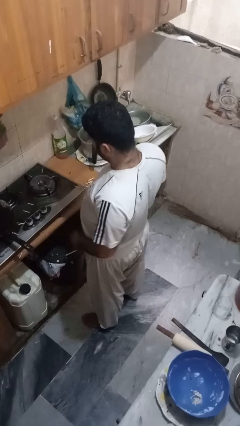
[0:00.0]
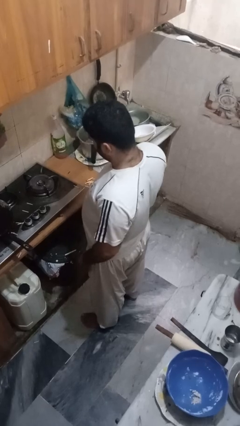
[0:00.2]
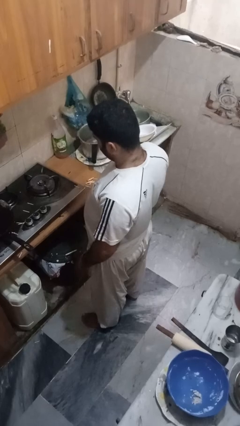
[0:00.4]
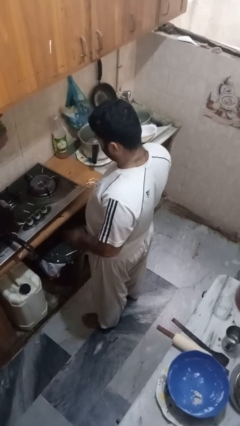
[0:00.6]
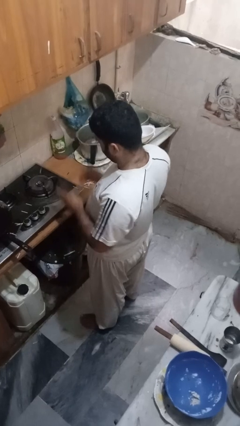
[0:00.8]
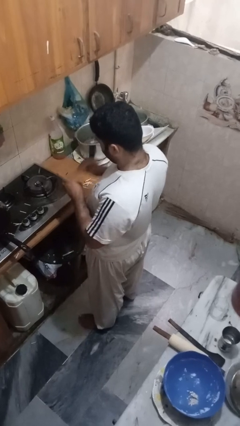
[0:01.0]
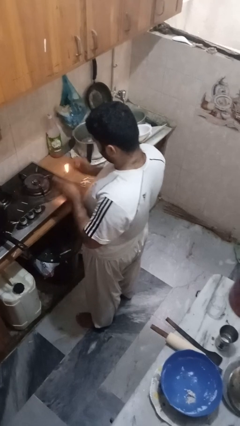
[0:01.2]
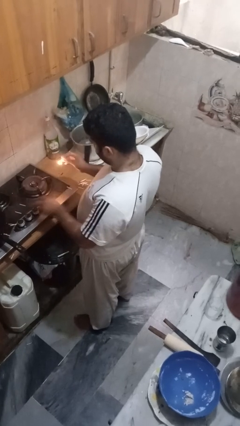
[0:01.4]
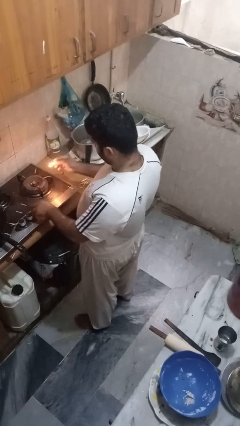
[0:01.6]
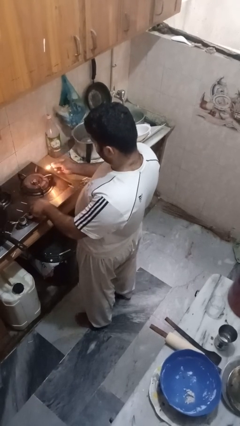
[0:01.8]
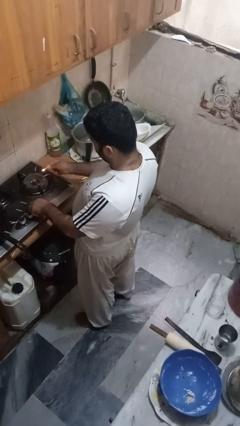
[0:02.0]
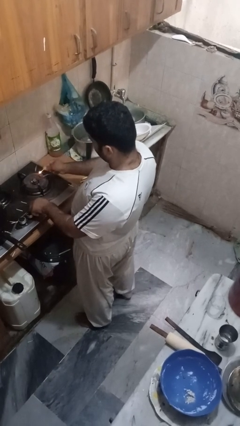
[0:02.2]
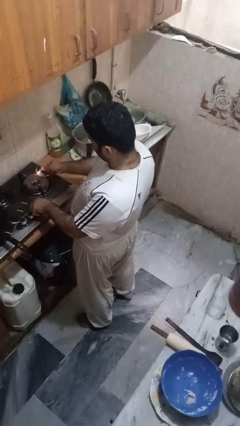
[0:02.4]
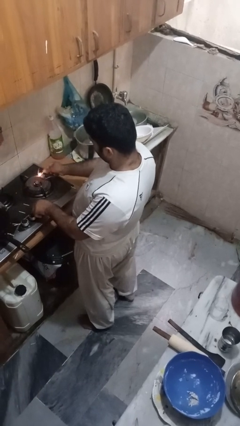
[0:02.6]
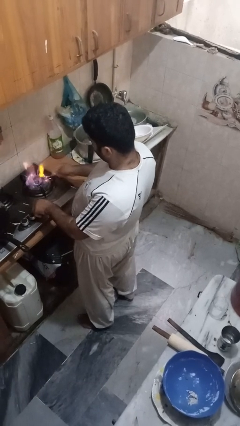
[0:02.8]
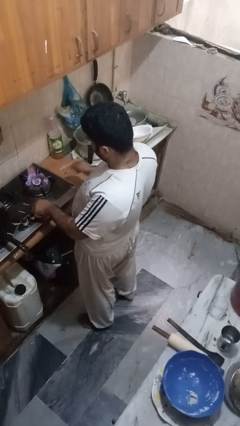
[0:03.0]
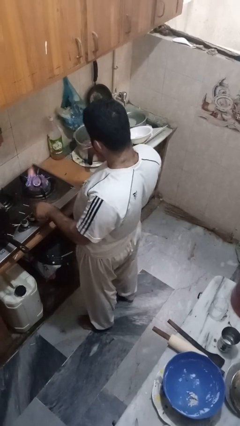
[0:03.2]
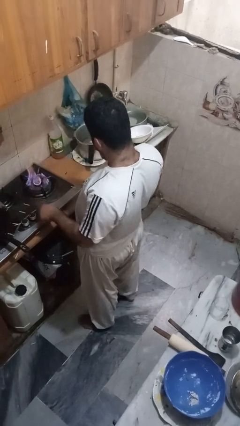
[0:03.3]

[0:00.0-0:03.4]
person turns on stovetop

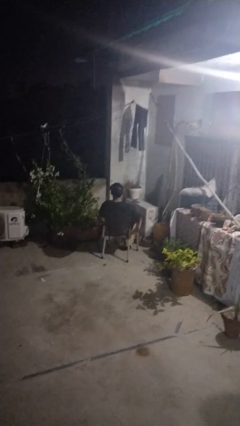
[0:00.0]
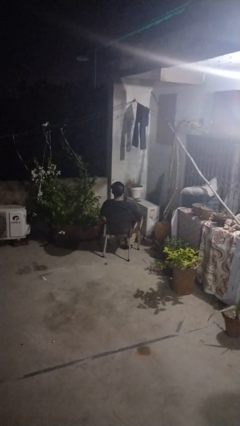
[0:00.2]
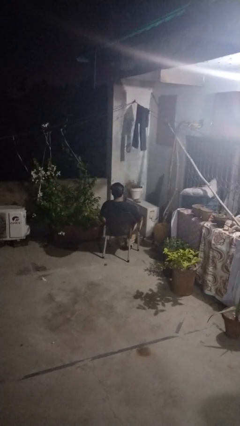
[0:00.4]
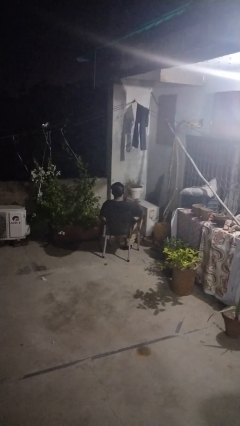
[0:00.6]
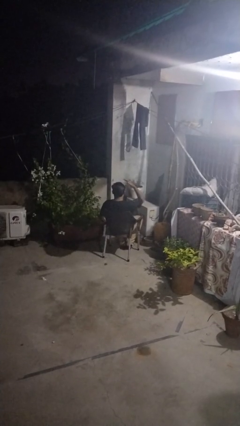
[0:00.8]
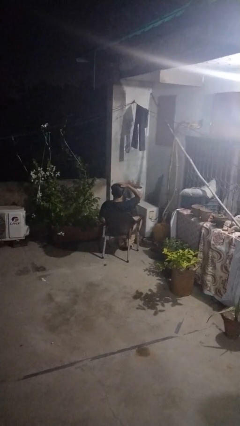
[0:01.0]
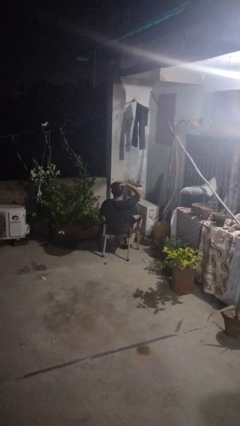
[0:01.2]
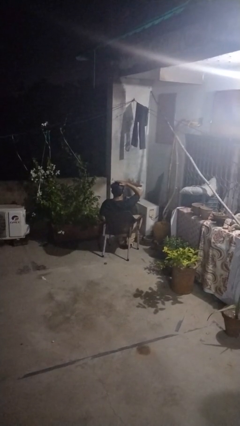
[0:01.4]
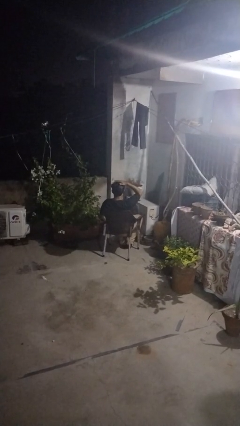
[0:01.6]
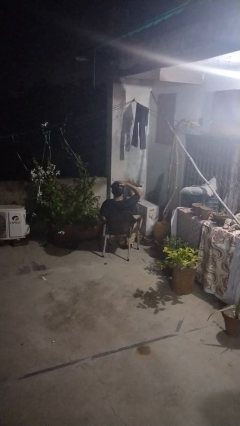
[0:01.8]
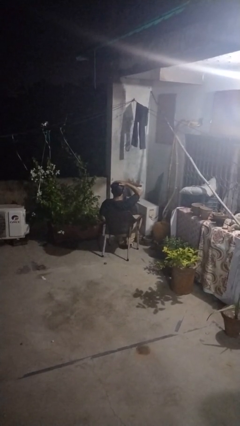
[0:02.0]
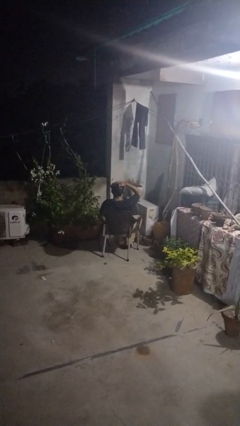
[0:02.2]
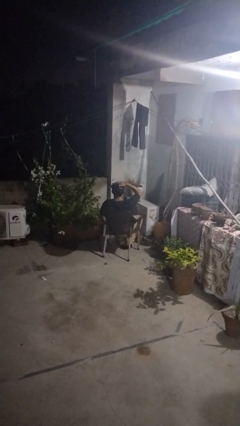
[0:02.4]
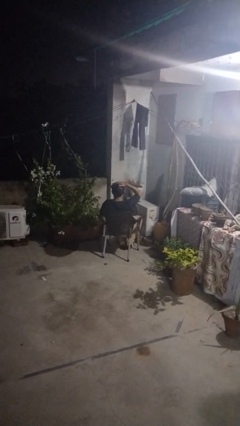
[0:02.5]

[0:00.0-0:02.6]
person pats head

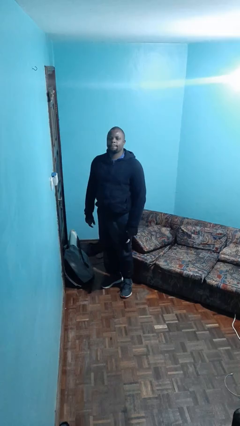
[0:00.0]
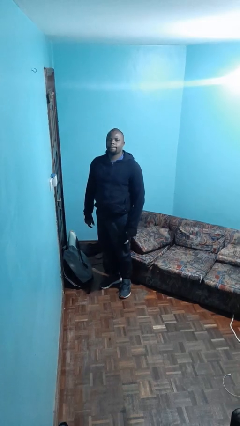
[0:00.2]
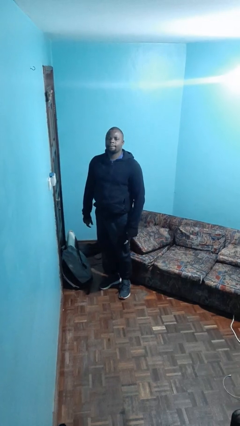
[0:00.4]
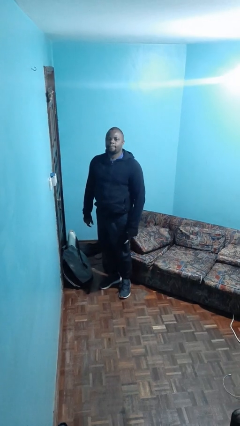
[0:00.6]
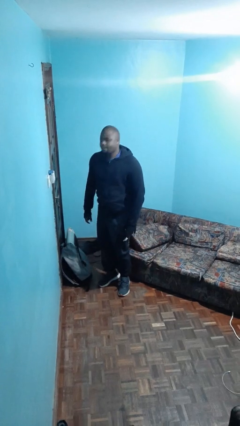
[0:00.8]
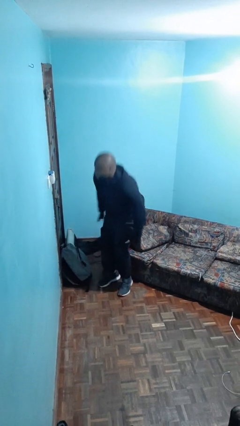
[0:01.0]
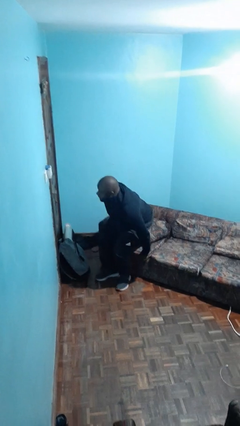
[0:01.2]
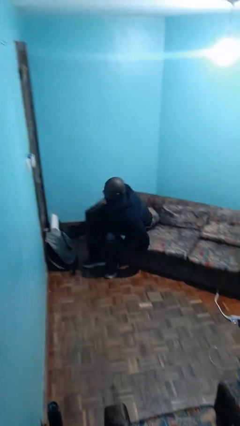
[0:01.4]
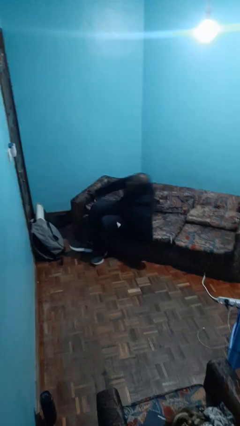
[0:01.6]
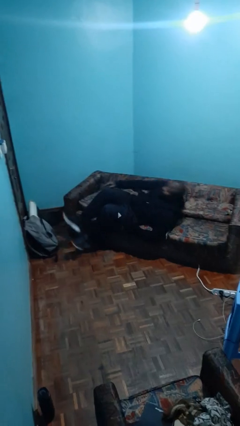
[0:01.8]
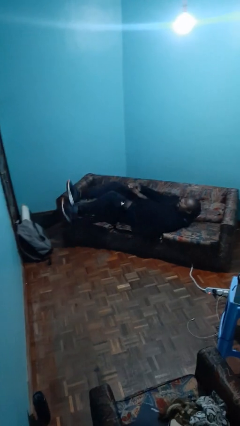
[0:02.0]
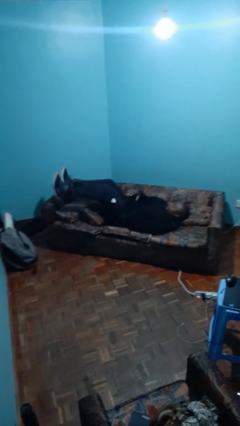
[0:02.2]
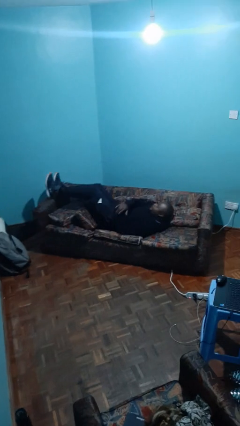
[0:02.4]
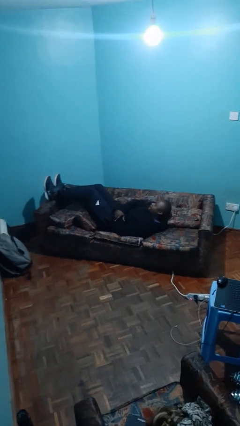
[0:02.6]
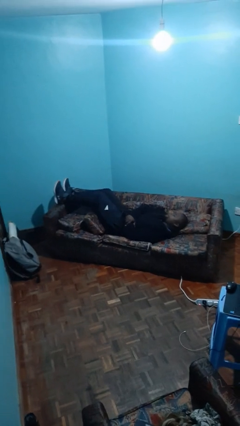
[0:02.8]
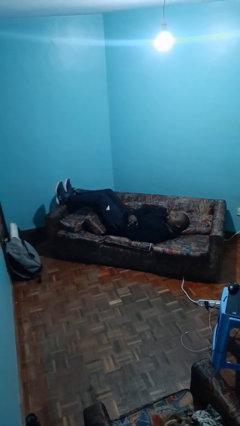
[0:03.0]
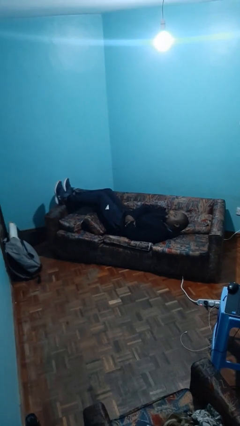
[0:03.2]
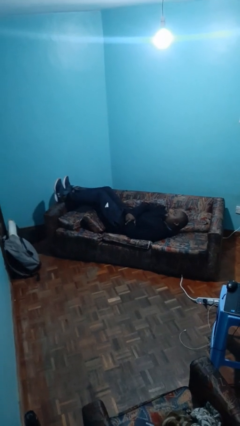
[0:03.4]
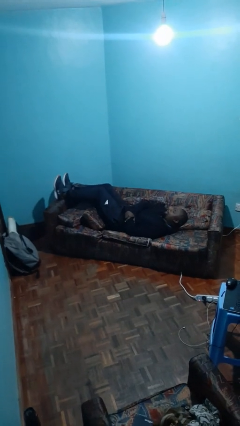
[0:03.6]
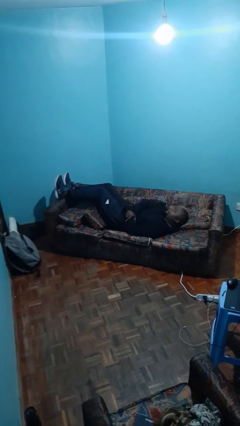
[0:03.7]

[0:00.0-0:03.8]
person lies down on couch

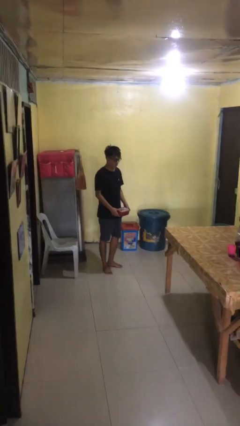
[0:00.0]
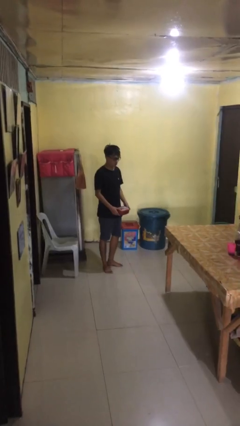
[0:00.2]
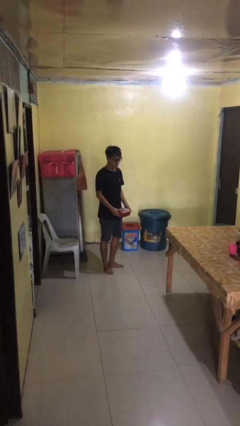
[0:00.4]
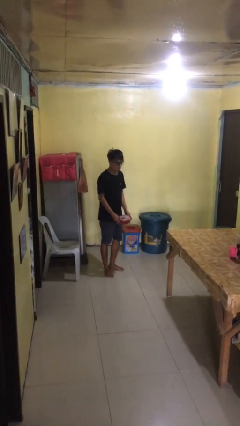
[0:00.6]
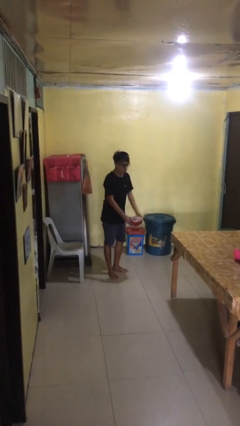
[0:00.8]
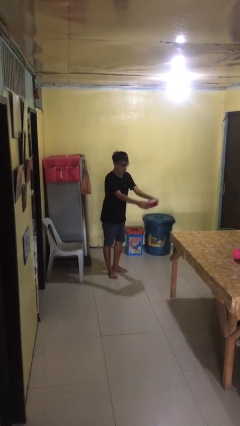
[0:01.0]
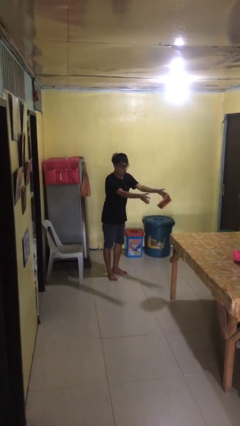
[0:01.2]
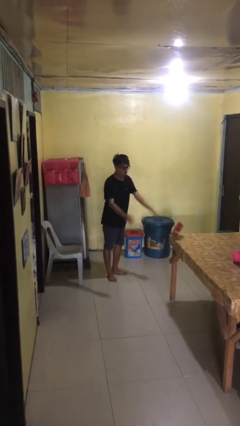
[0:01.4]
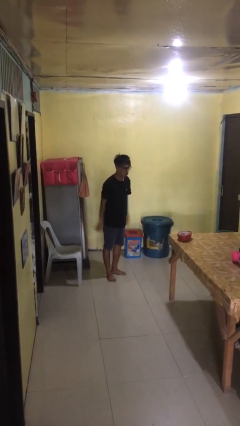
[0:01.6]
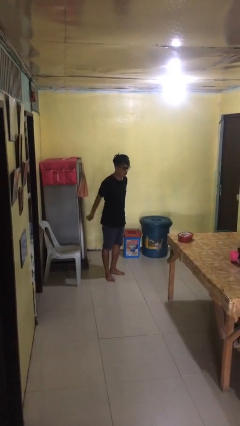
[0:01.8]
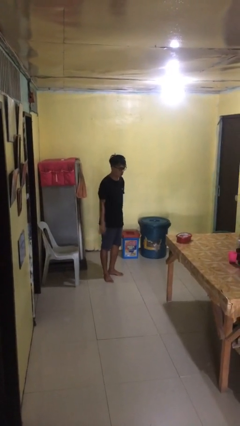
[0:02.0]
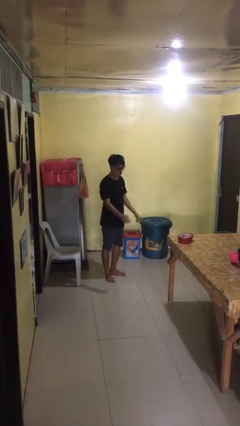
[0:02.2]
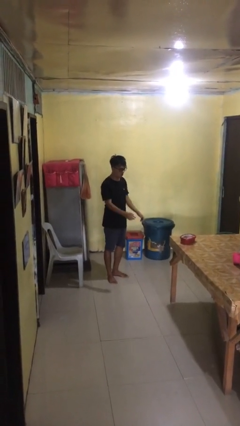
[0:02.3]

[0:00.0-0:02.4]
person throws object on table

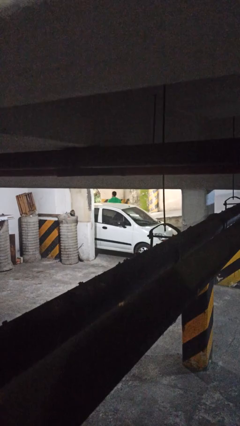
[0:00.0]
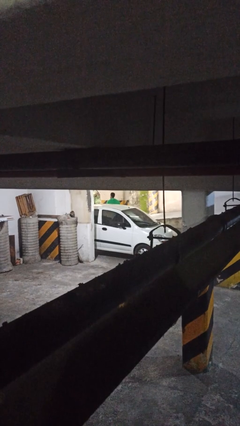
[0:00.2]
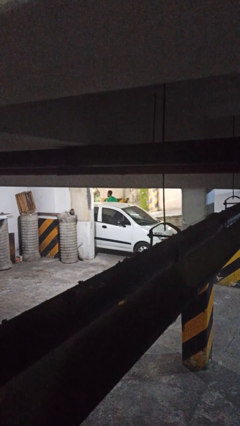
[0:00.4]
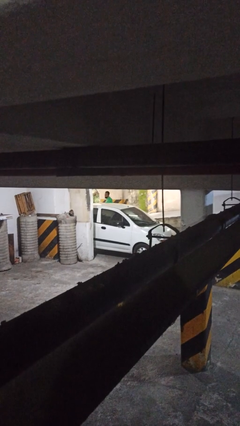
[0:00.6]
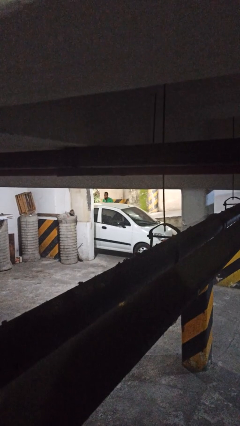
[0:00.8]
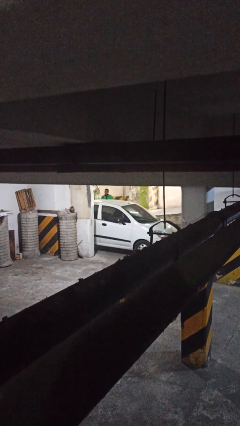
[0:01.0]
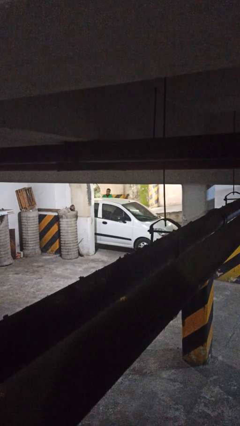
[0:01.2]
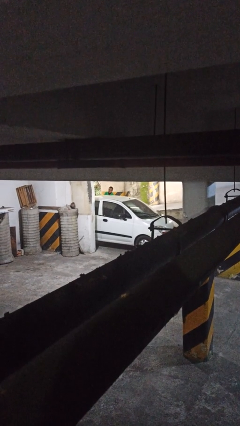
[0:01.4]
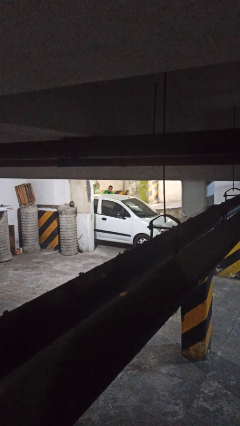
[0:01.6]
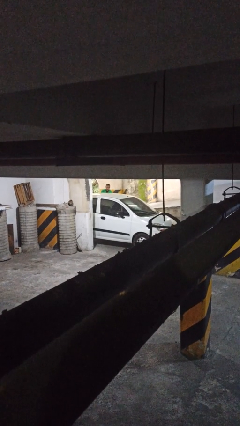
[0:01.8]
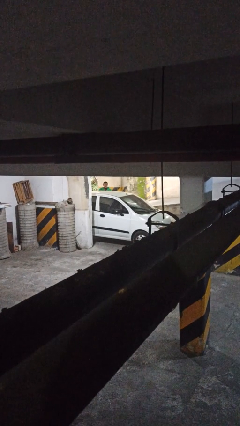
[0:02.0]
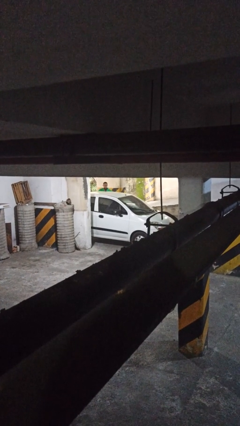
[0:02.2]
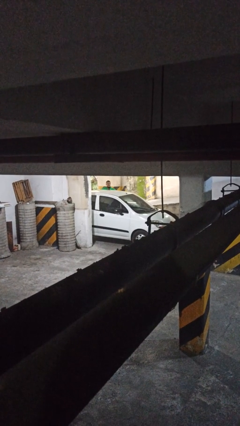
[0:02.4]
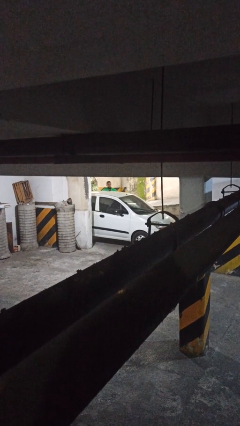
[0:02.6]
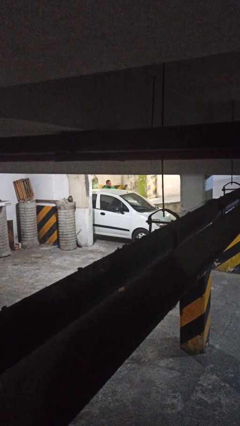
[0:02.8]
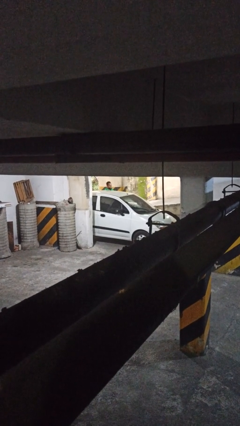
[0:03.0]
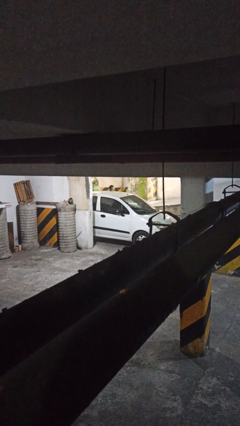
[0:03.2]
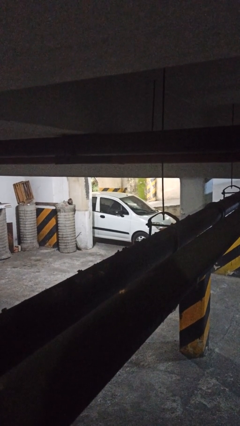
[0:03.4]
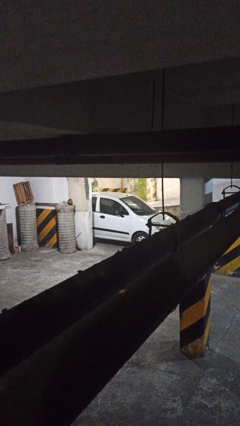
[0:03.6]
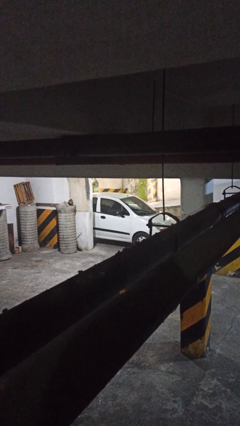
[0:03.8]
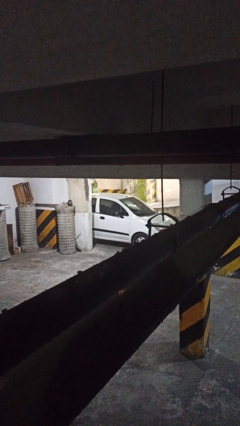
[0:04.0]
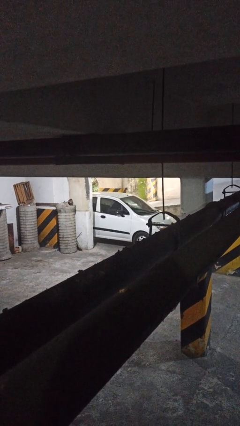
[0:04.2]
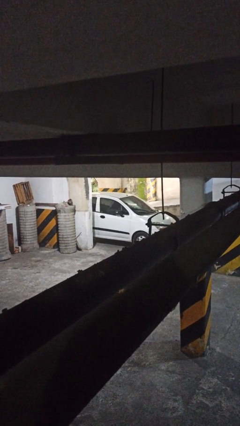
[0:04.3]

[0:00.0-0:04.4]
car picks up person

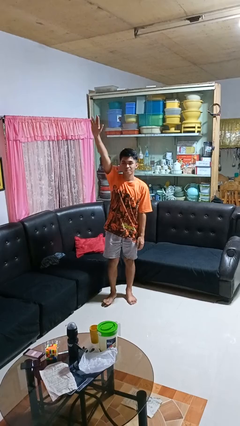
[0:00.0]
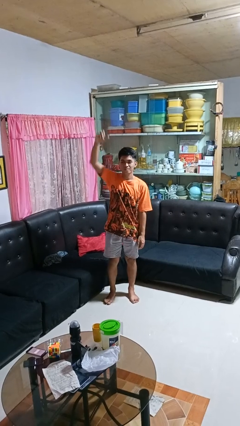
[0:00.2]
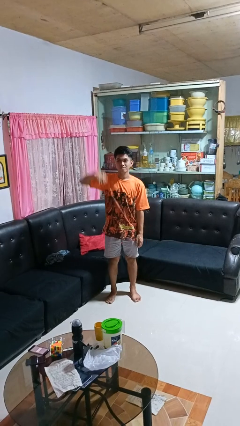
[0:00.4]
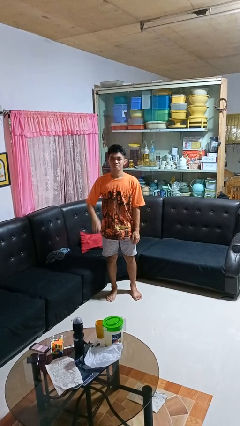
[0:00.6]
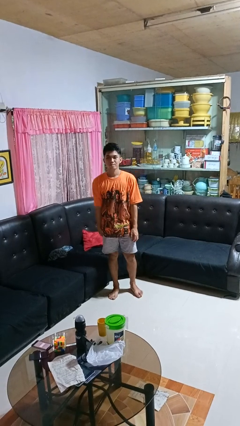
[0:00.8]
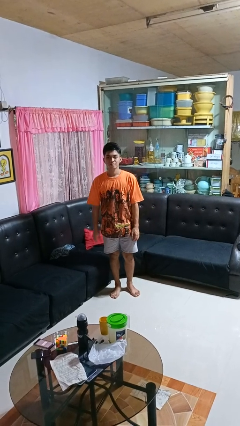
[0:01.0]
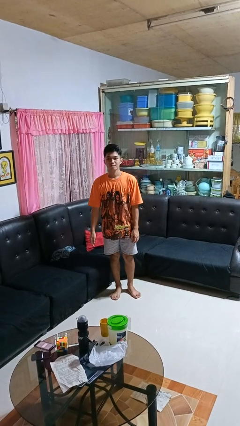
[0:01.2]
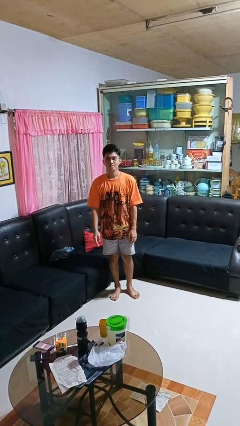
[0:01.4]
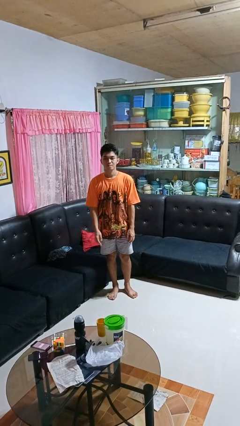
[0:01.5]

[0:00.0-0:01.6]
person gestures lower hand
